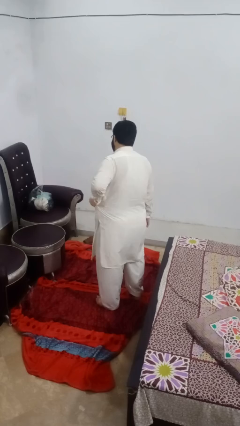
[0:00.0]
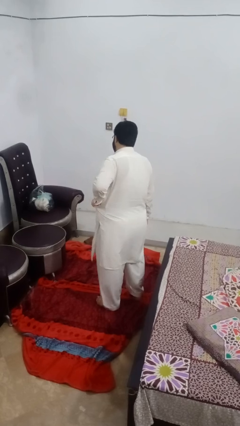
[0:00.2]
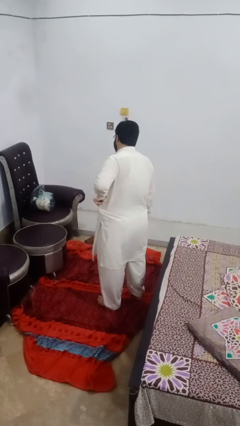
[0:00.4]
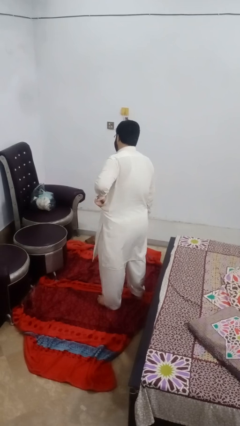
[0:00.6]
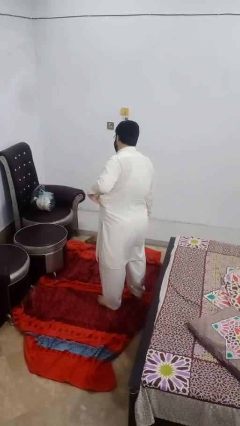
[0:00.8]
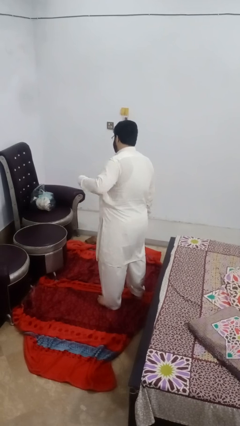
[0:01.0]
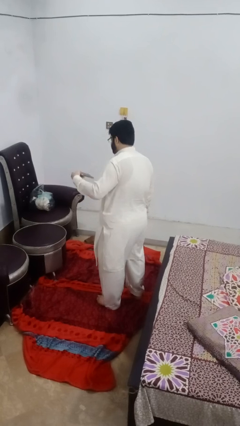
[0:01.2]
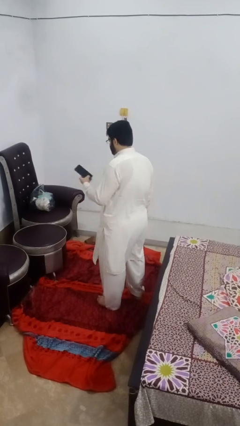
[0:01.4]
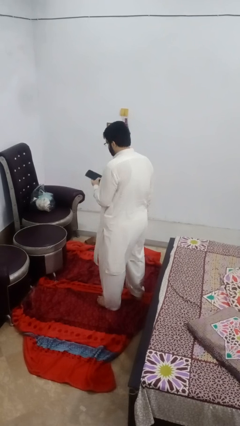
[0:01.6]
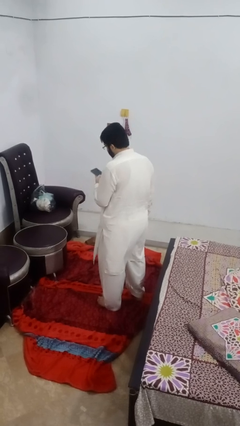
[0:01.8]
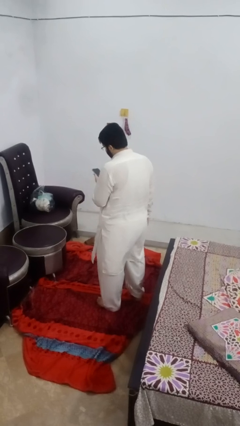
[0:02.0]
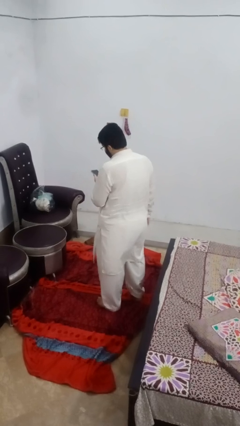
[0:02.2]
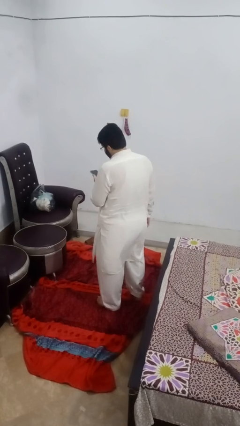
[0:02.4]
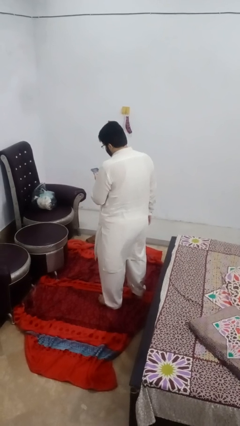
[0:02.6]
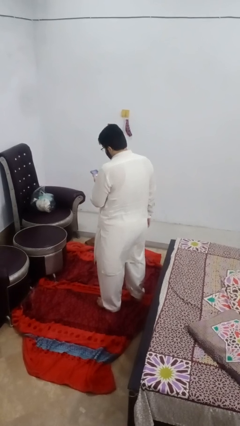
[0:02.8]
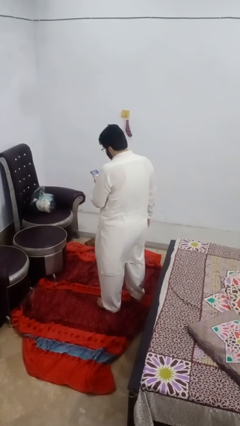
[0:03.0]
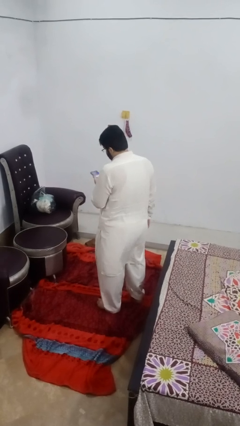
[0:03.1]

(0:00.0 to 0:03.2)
person takes phone from pocket

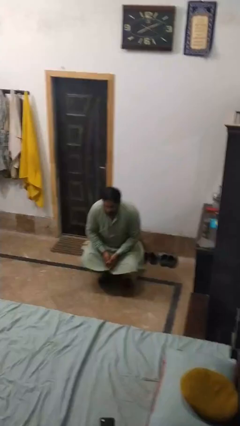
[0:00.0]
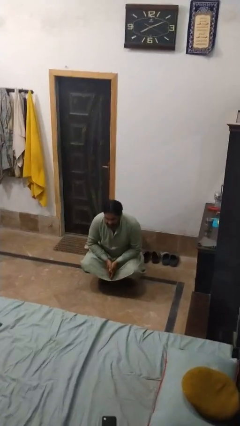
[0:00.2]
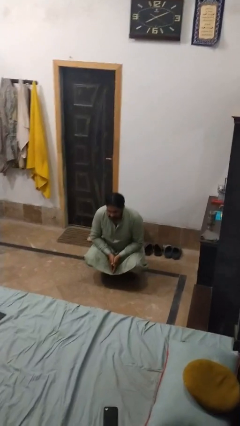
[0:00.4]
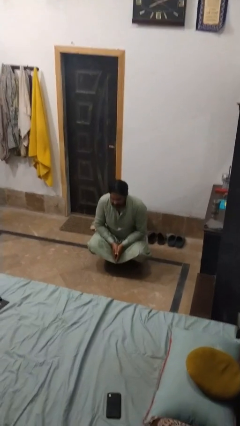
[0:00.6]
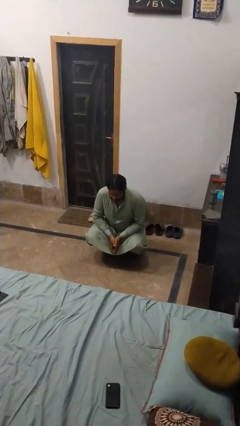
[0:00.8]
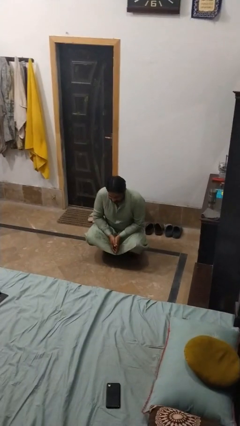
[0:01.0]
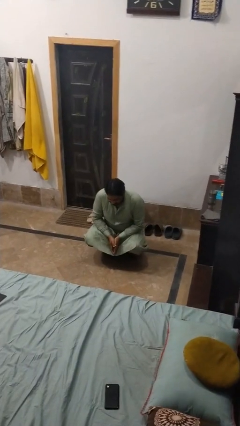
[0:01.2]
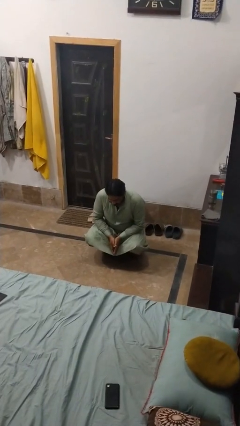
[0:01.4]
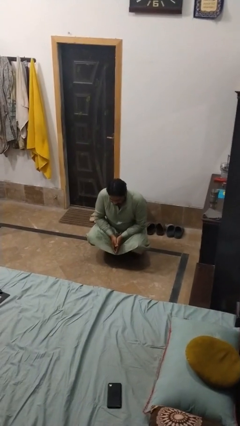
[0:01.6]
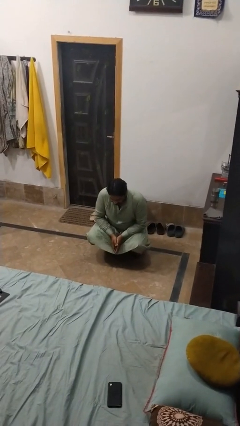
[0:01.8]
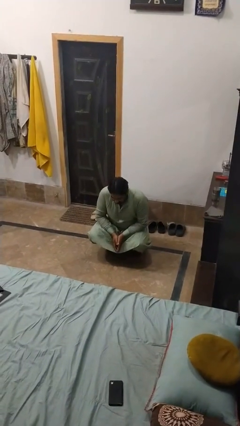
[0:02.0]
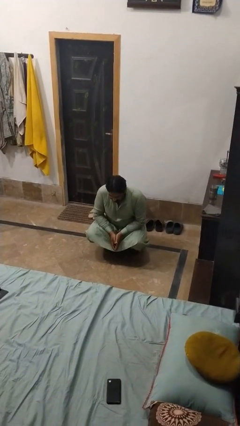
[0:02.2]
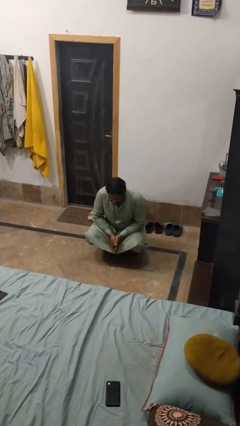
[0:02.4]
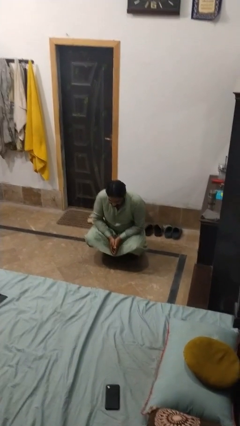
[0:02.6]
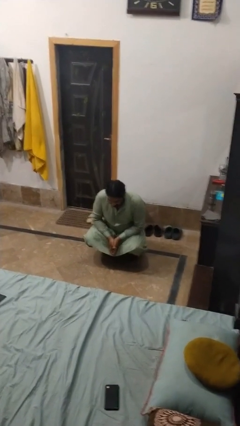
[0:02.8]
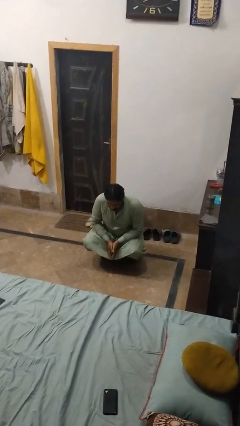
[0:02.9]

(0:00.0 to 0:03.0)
person squats

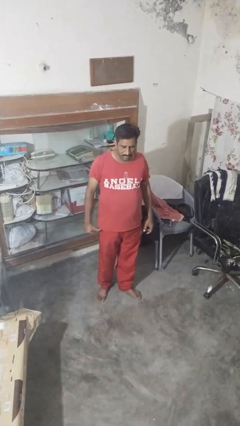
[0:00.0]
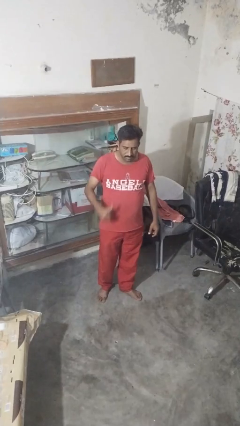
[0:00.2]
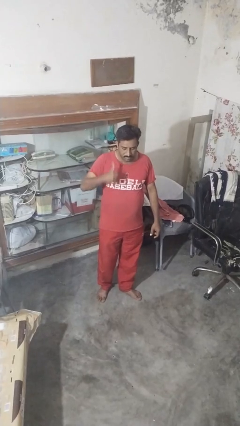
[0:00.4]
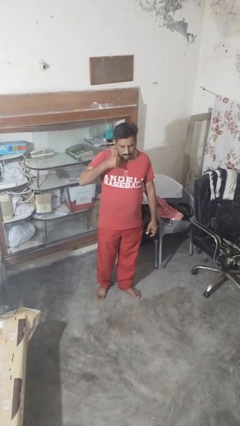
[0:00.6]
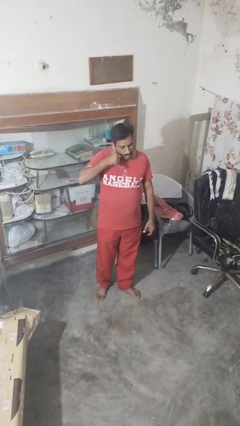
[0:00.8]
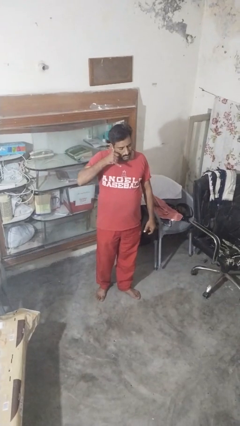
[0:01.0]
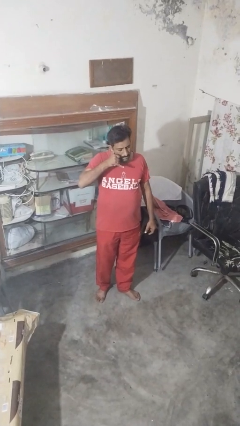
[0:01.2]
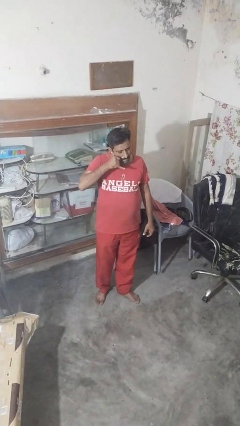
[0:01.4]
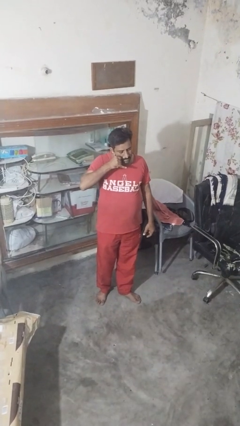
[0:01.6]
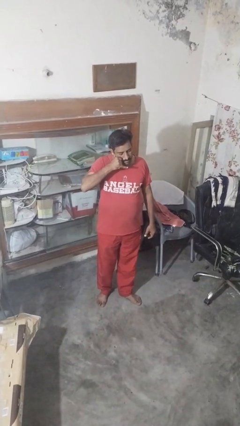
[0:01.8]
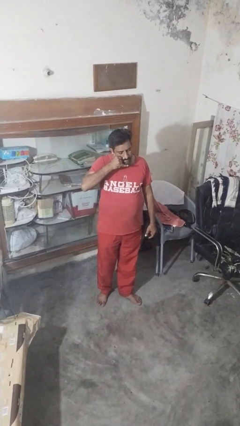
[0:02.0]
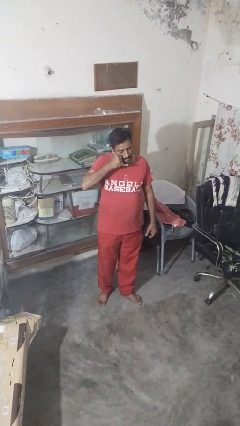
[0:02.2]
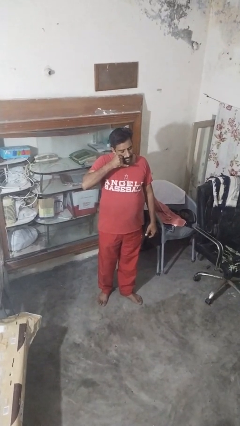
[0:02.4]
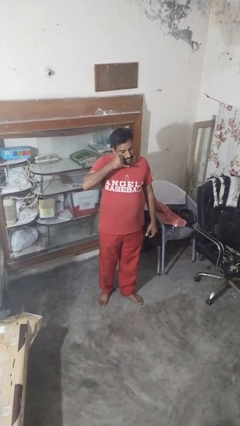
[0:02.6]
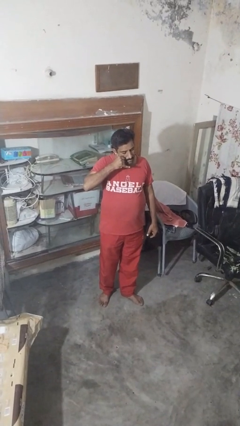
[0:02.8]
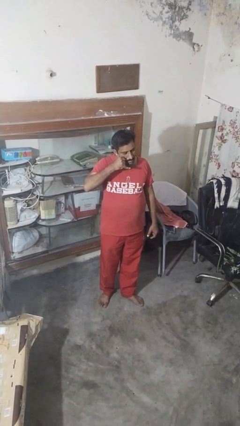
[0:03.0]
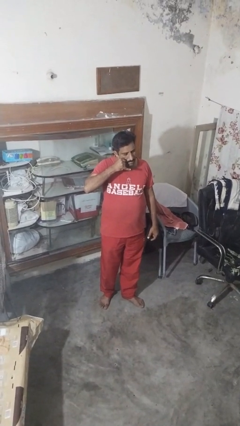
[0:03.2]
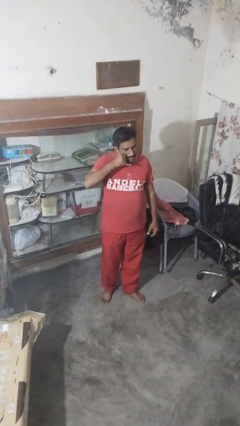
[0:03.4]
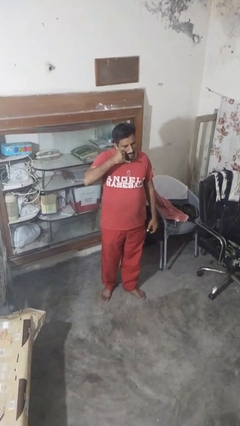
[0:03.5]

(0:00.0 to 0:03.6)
person gestures call me

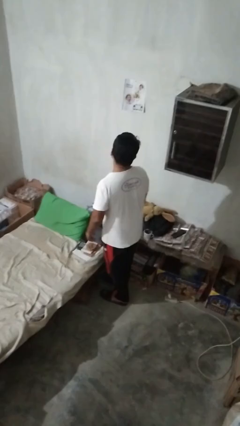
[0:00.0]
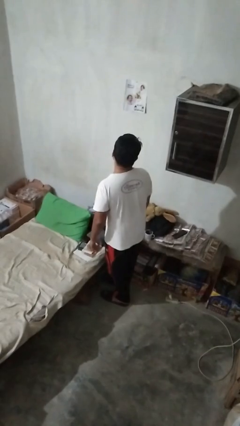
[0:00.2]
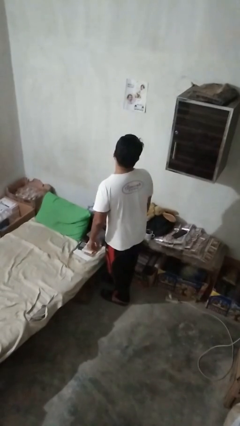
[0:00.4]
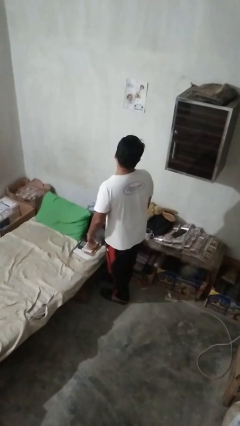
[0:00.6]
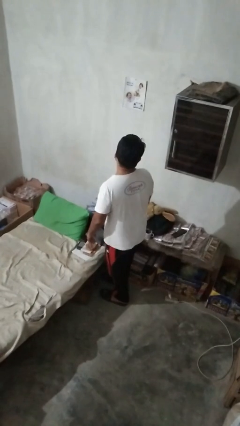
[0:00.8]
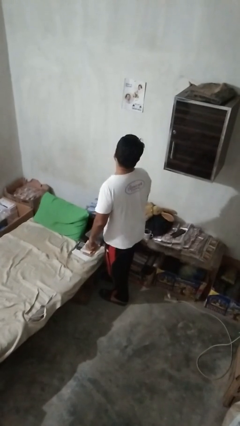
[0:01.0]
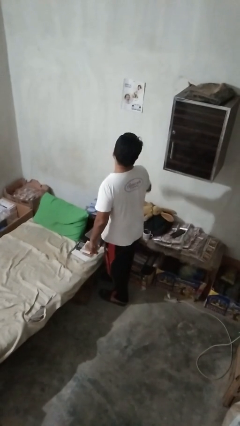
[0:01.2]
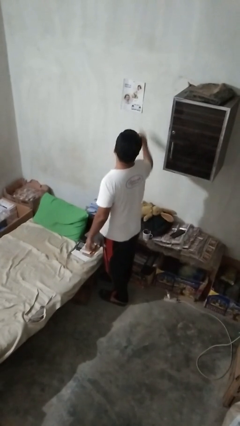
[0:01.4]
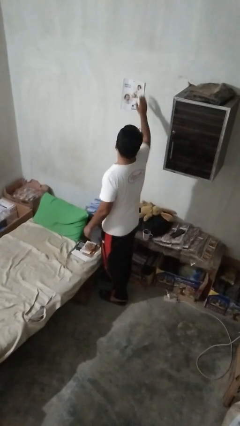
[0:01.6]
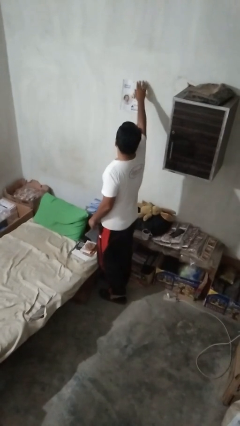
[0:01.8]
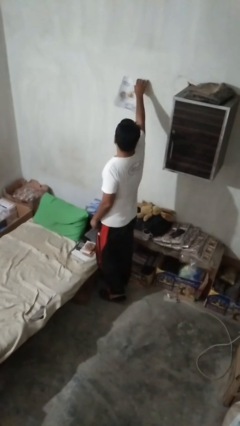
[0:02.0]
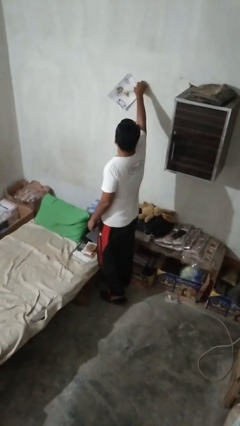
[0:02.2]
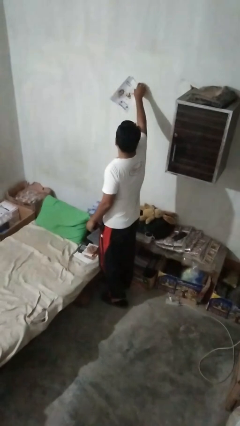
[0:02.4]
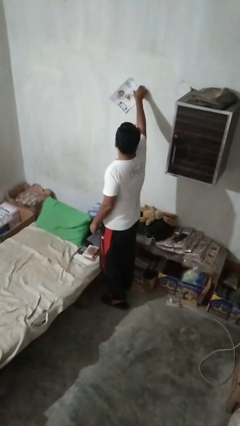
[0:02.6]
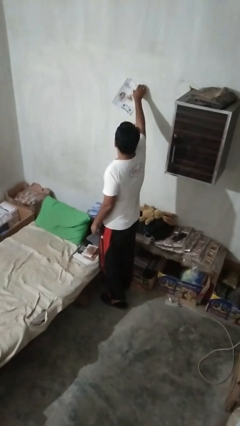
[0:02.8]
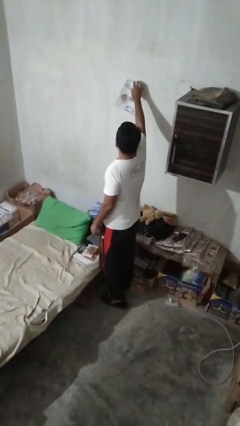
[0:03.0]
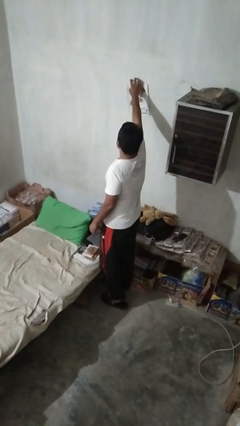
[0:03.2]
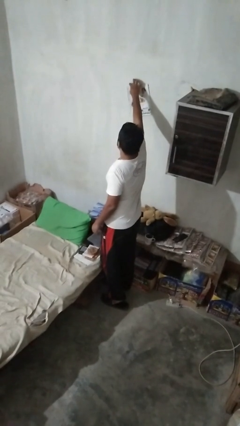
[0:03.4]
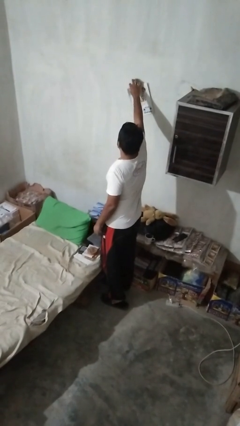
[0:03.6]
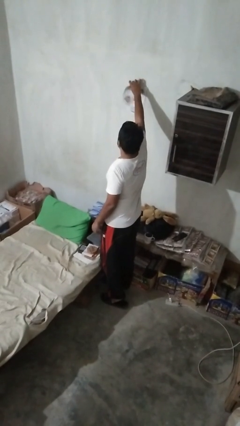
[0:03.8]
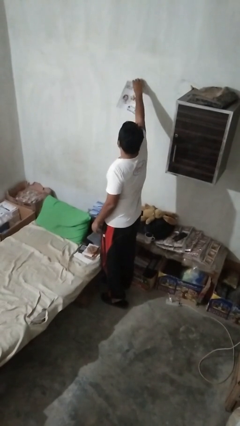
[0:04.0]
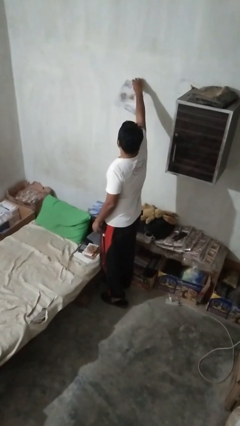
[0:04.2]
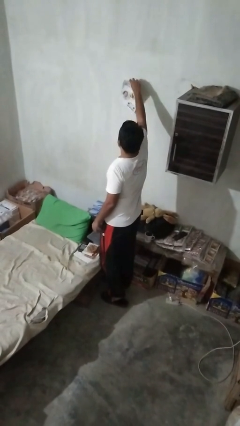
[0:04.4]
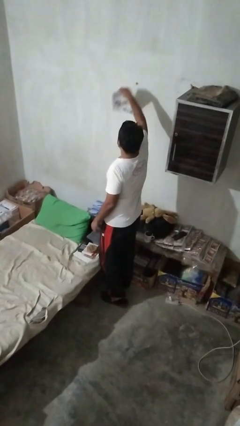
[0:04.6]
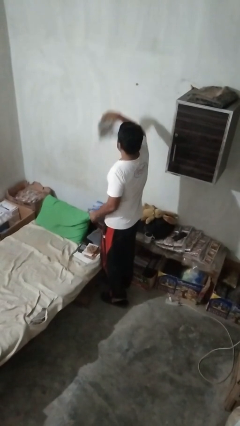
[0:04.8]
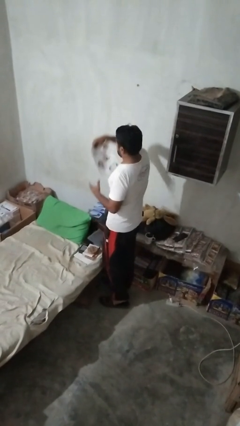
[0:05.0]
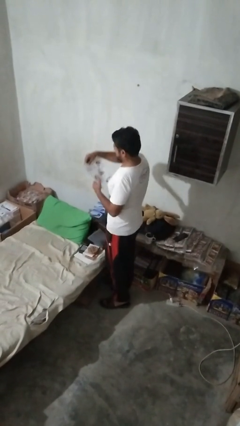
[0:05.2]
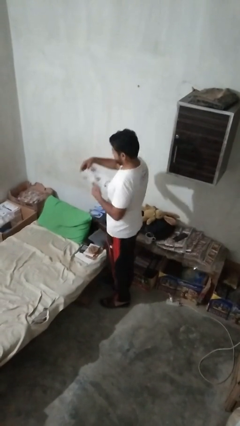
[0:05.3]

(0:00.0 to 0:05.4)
person takes down picture frame

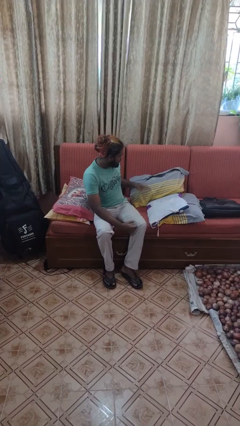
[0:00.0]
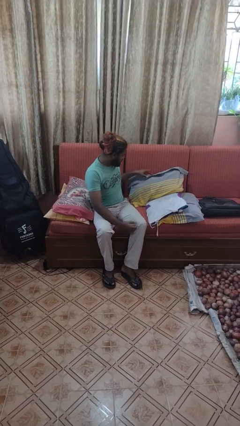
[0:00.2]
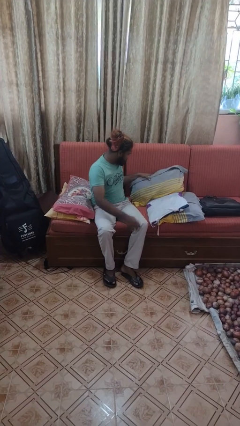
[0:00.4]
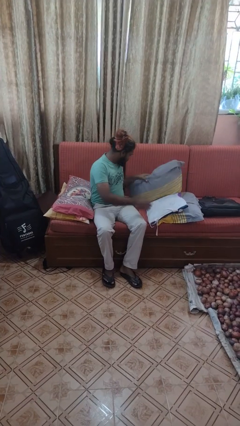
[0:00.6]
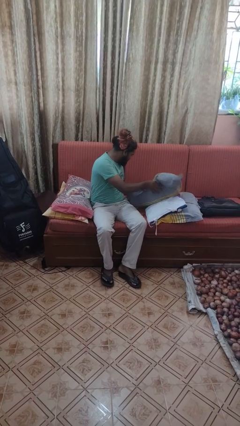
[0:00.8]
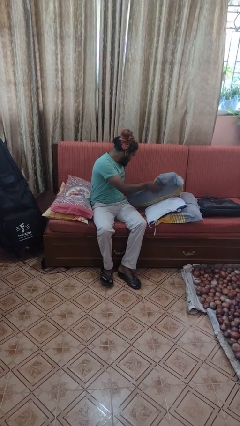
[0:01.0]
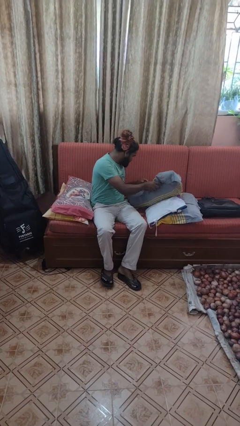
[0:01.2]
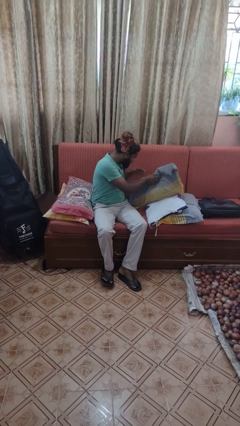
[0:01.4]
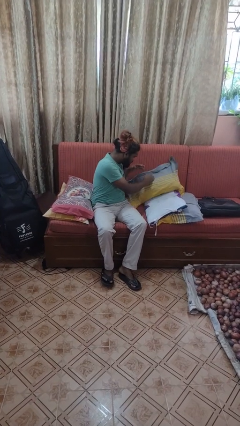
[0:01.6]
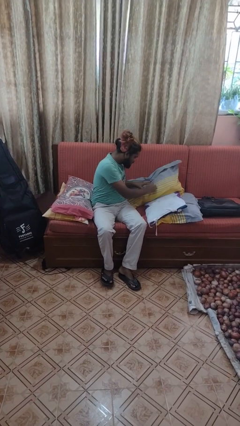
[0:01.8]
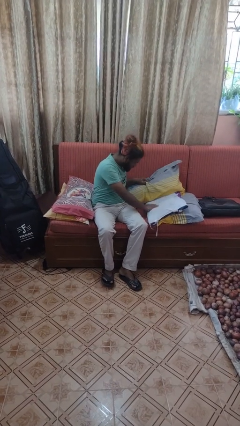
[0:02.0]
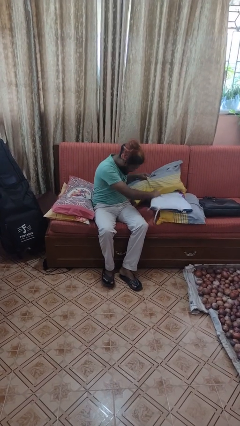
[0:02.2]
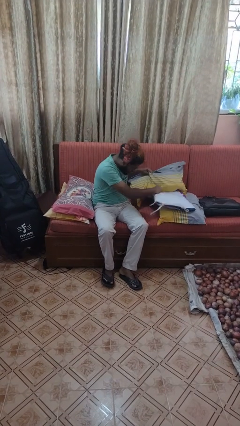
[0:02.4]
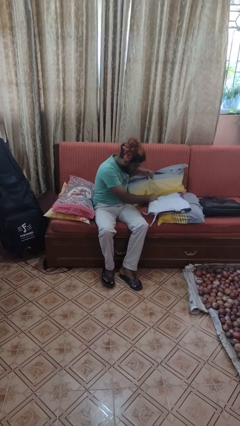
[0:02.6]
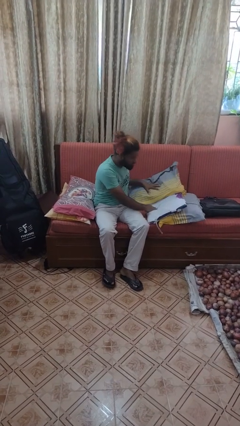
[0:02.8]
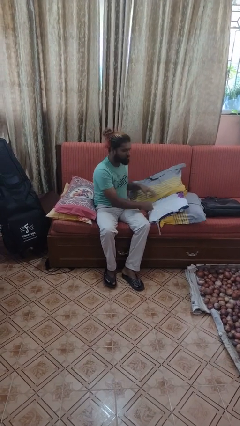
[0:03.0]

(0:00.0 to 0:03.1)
person searches in couch
